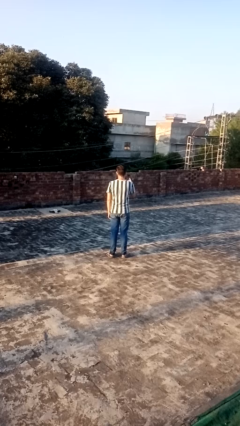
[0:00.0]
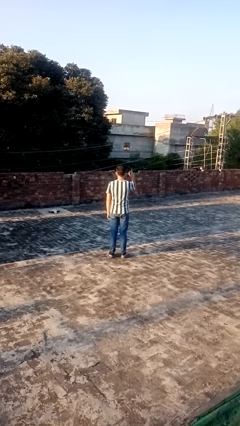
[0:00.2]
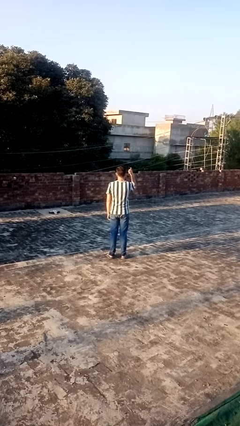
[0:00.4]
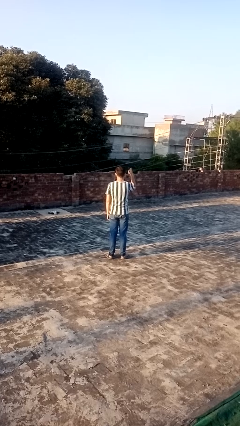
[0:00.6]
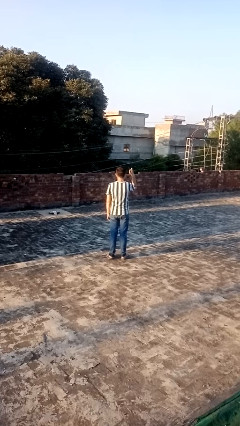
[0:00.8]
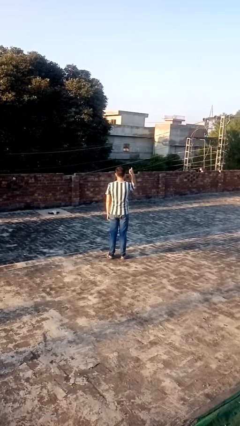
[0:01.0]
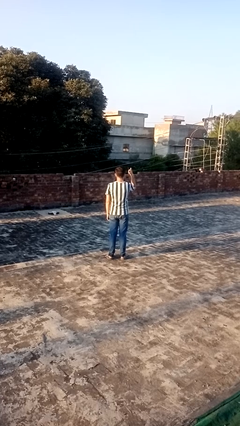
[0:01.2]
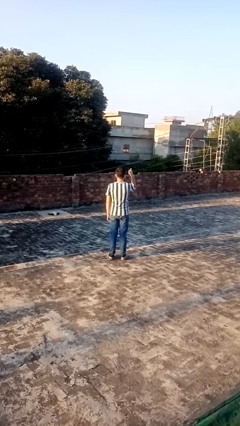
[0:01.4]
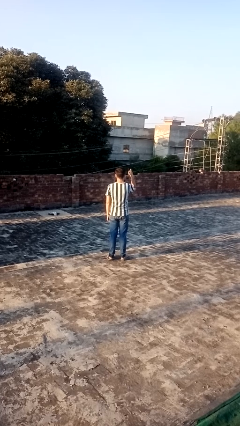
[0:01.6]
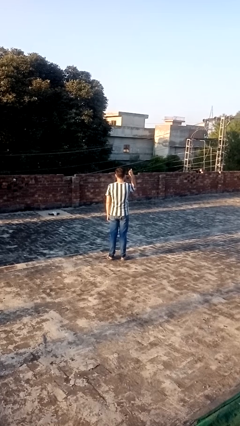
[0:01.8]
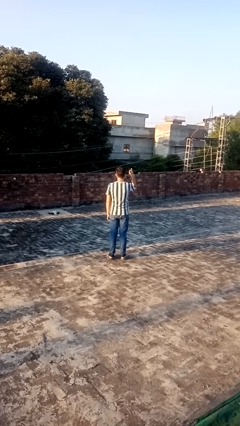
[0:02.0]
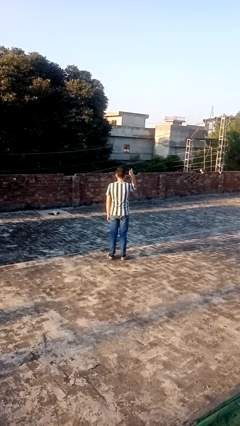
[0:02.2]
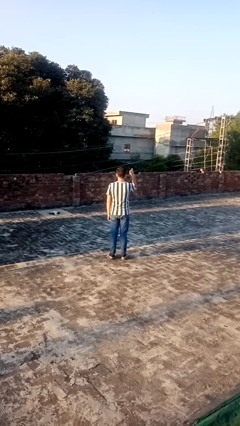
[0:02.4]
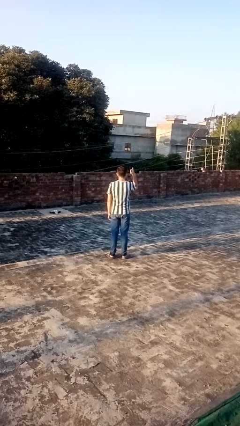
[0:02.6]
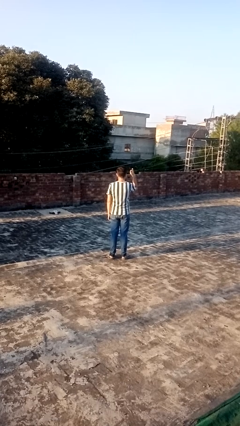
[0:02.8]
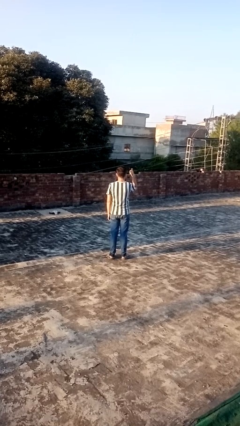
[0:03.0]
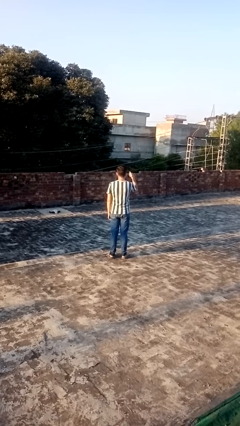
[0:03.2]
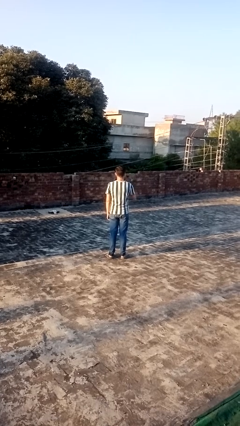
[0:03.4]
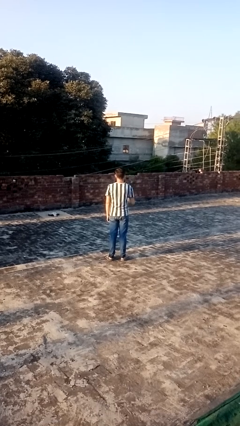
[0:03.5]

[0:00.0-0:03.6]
person gestures thumbs up

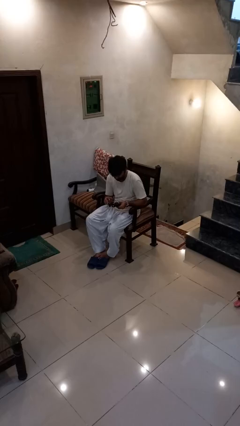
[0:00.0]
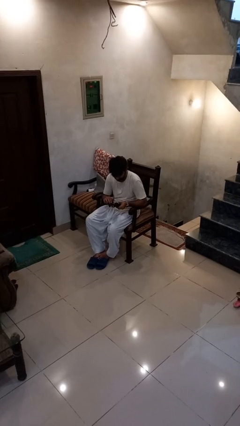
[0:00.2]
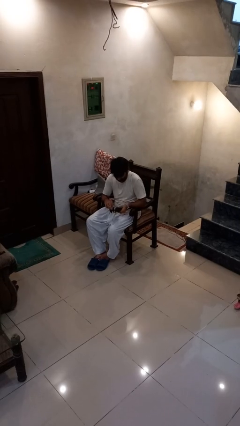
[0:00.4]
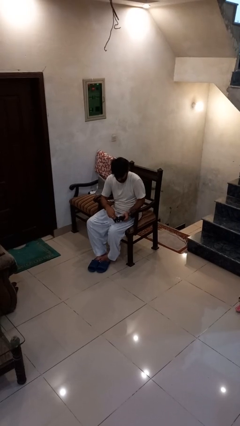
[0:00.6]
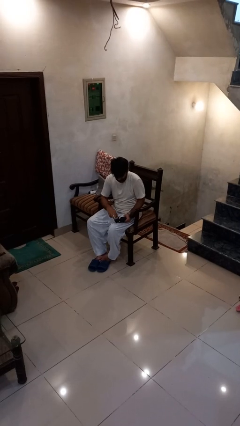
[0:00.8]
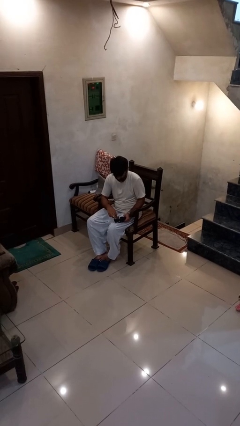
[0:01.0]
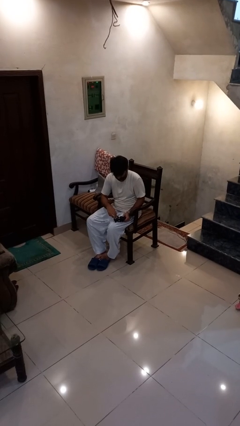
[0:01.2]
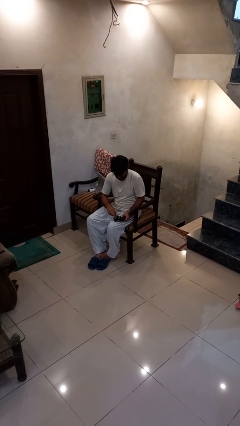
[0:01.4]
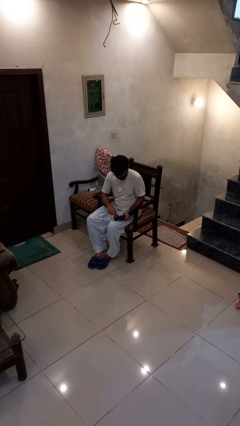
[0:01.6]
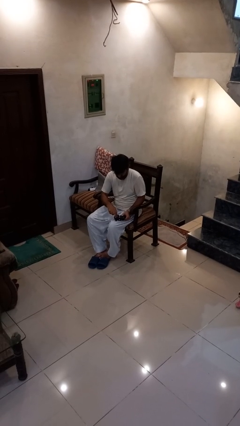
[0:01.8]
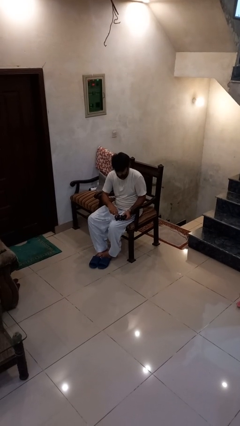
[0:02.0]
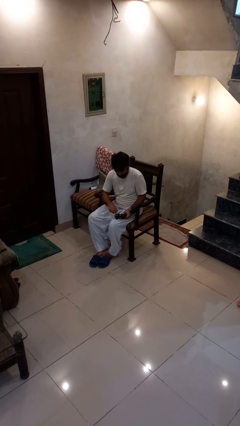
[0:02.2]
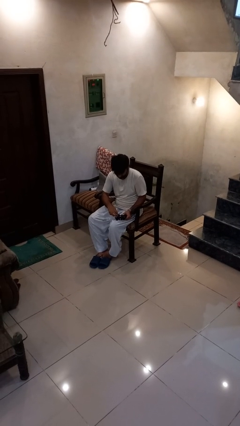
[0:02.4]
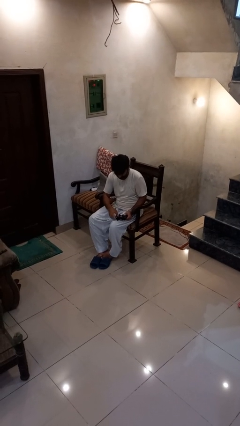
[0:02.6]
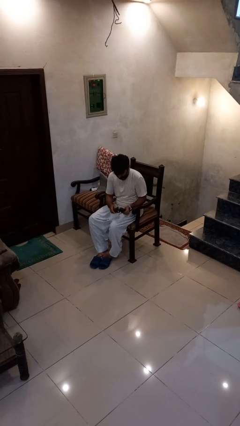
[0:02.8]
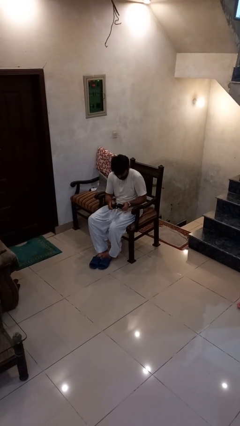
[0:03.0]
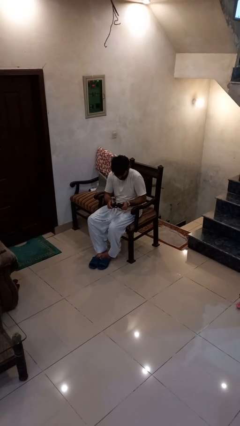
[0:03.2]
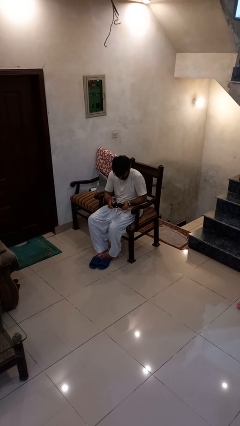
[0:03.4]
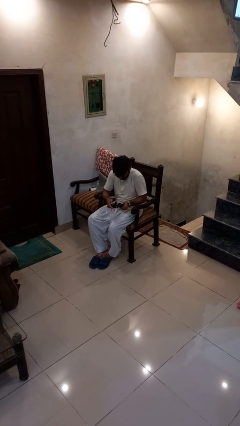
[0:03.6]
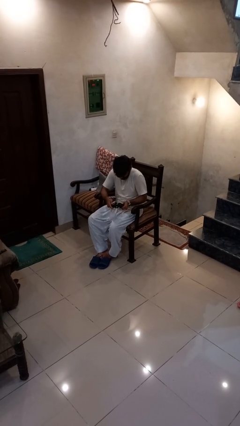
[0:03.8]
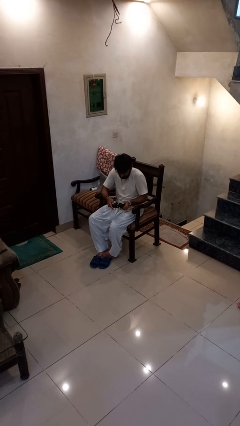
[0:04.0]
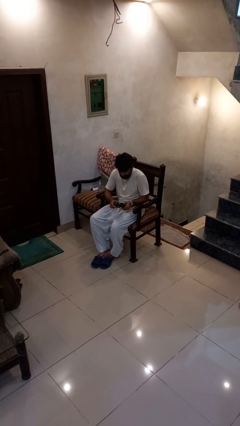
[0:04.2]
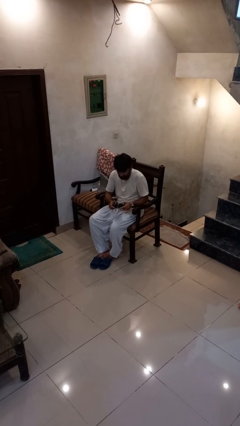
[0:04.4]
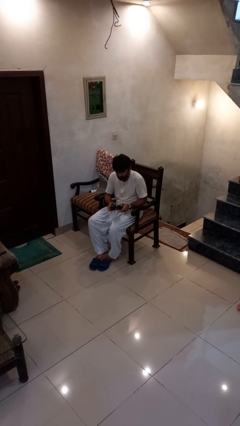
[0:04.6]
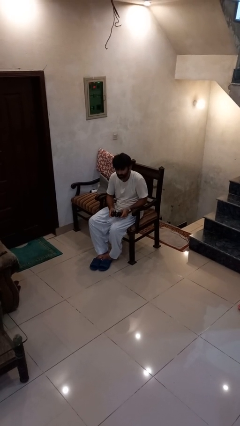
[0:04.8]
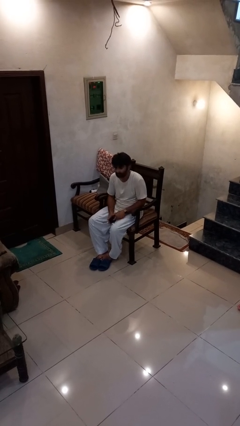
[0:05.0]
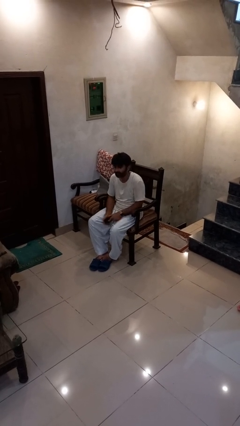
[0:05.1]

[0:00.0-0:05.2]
person interacts with handheld game

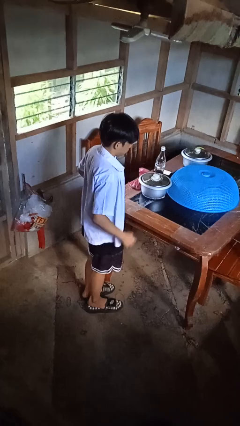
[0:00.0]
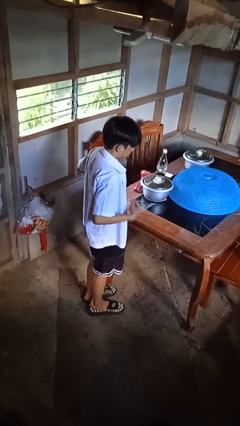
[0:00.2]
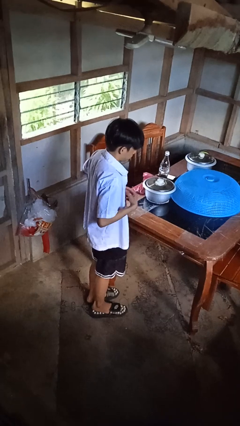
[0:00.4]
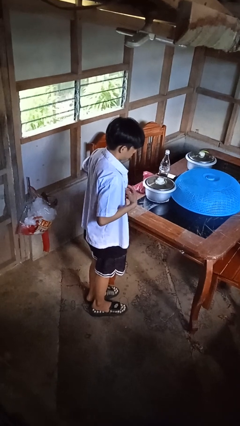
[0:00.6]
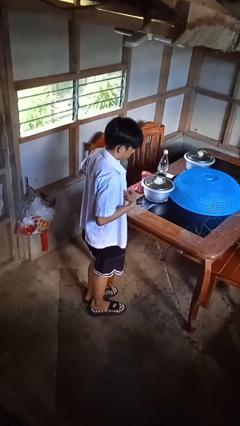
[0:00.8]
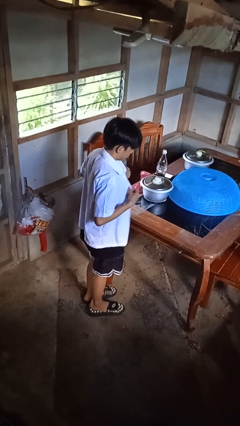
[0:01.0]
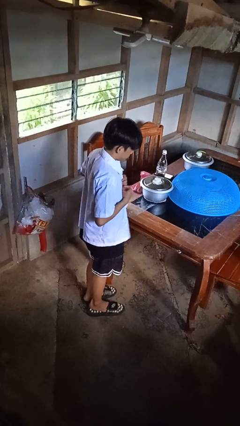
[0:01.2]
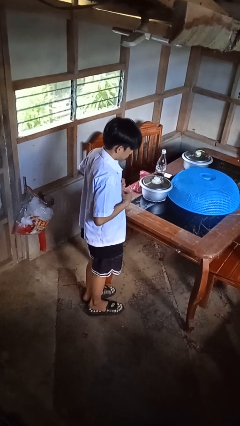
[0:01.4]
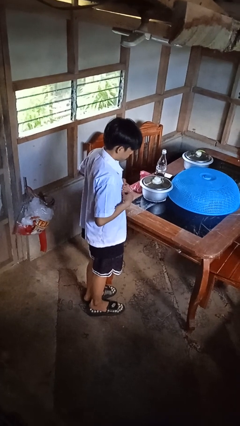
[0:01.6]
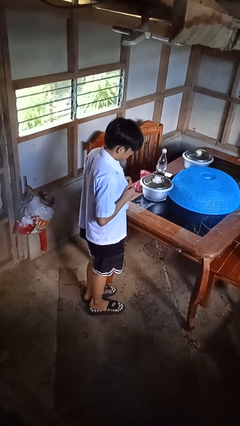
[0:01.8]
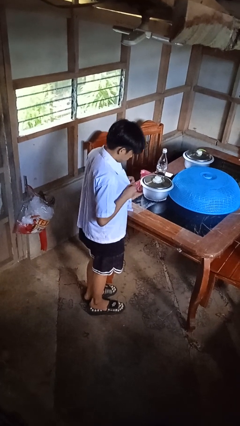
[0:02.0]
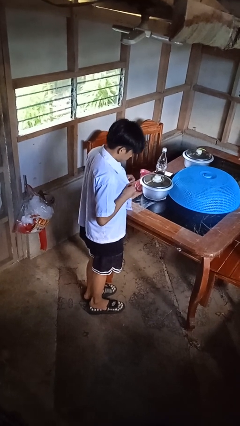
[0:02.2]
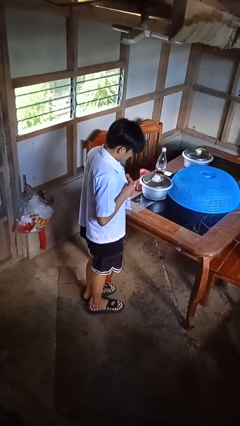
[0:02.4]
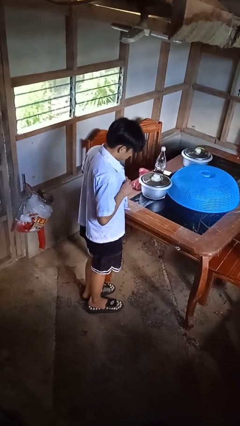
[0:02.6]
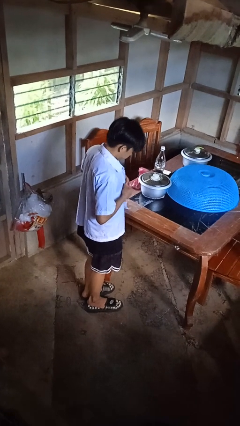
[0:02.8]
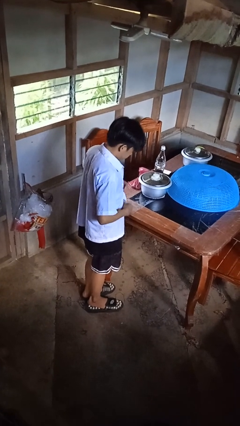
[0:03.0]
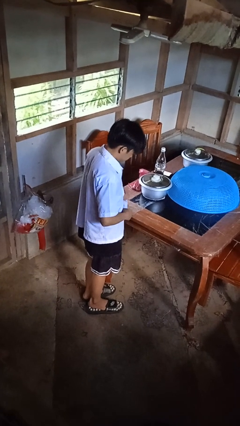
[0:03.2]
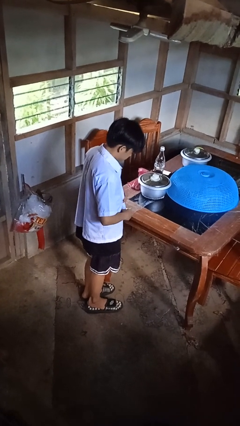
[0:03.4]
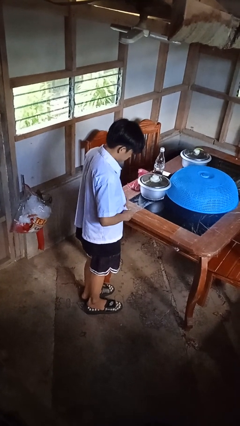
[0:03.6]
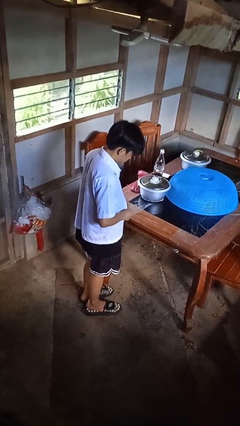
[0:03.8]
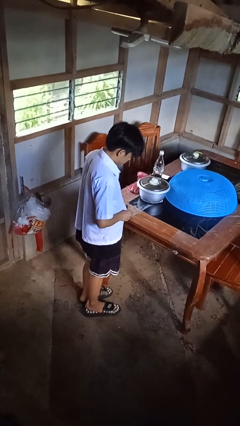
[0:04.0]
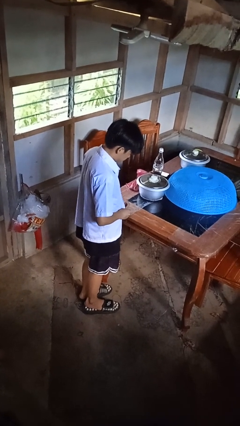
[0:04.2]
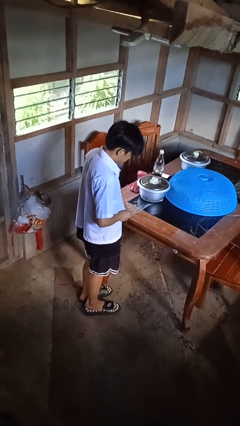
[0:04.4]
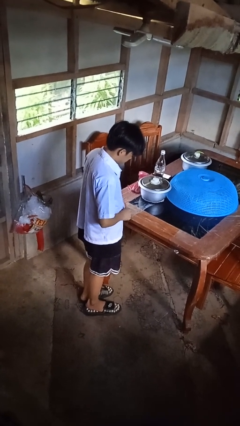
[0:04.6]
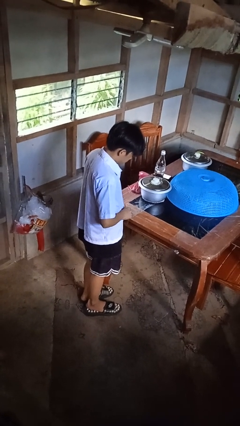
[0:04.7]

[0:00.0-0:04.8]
person buttons shirt

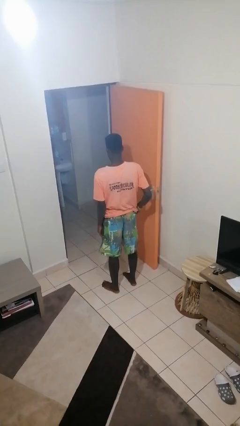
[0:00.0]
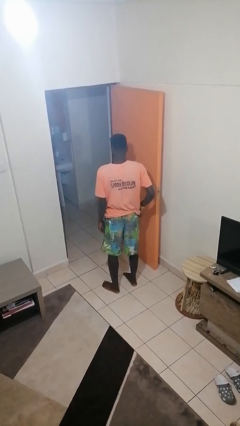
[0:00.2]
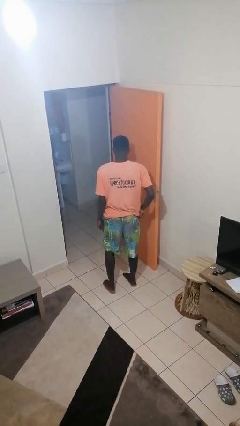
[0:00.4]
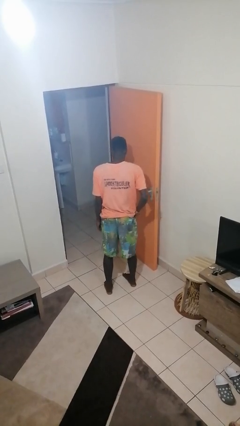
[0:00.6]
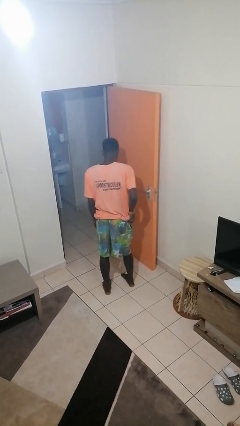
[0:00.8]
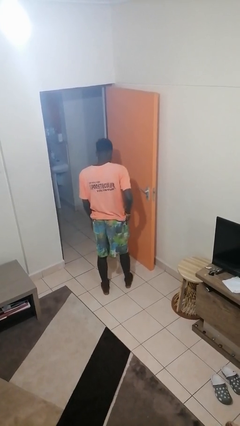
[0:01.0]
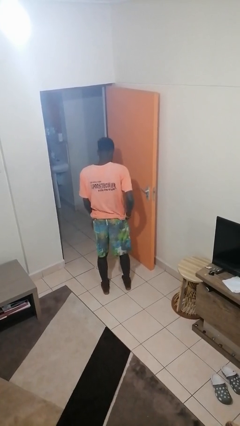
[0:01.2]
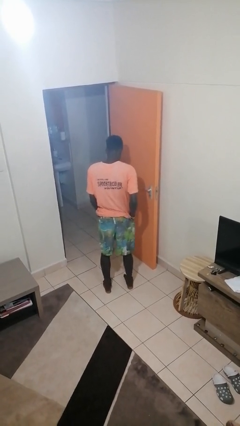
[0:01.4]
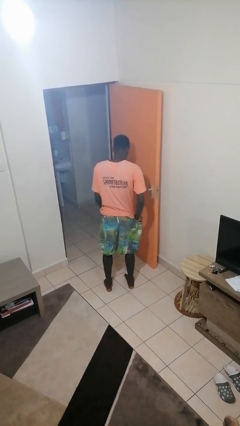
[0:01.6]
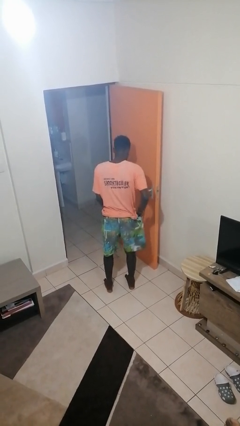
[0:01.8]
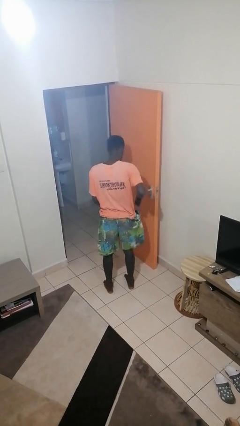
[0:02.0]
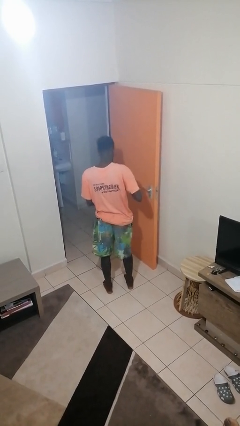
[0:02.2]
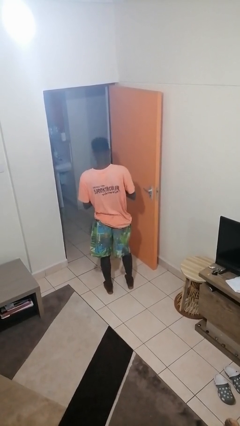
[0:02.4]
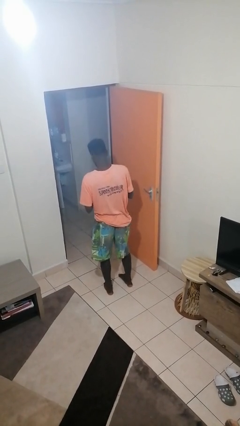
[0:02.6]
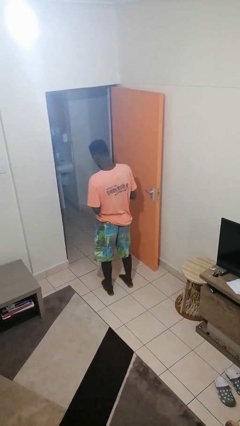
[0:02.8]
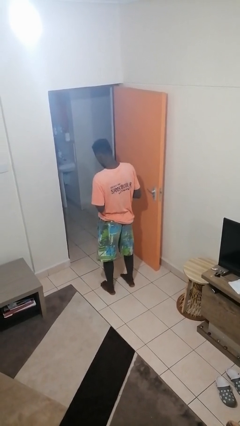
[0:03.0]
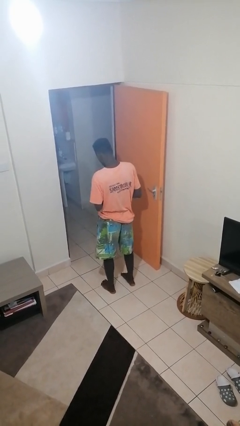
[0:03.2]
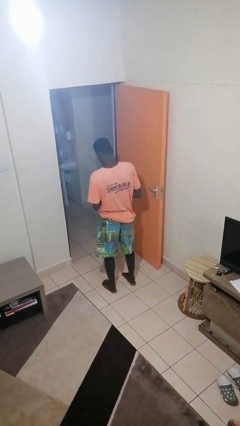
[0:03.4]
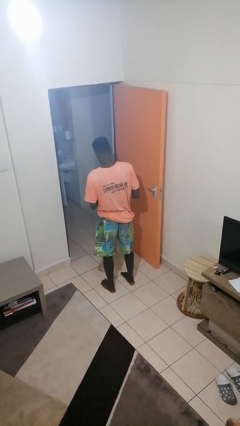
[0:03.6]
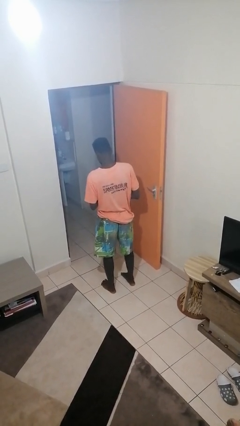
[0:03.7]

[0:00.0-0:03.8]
person takes phone from pocket

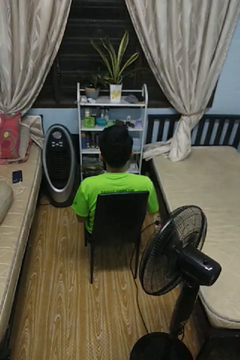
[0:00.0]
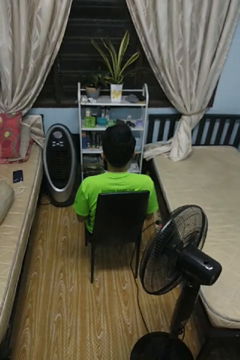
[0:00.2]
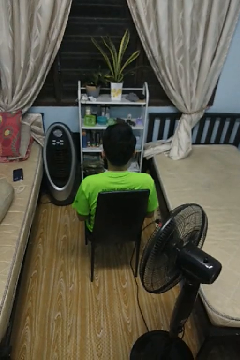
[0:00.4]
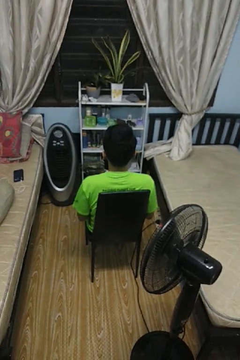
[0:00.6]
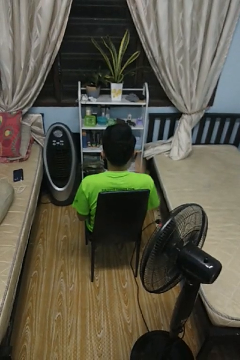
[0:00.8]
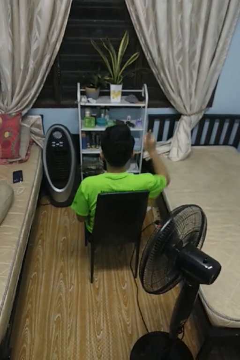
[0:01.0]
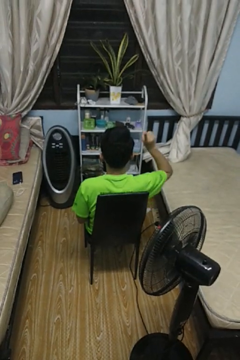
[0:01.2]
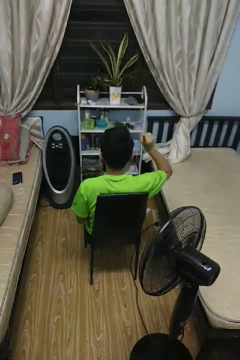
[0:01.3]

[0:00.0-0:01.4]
person gestures number one
